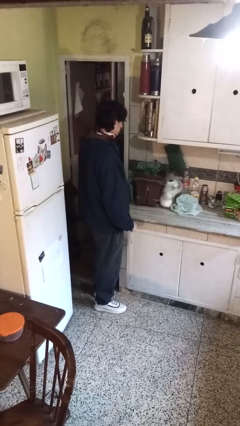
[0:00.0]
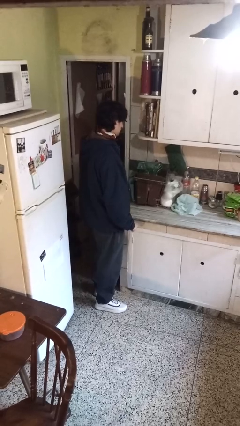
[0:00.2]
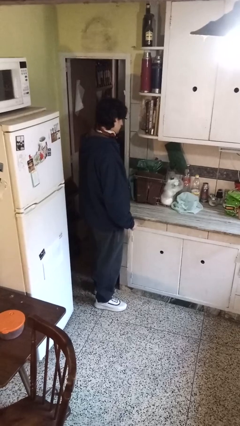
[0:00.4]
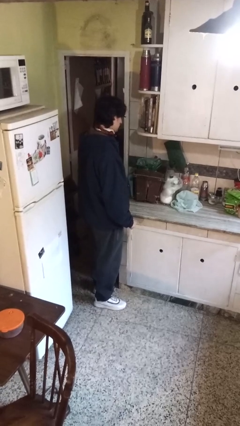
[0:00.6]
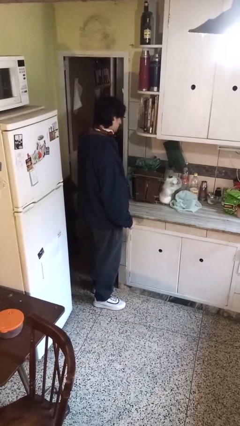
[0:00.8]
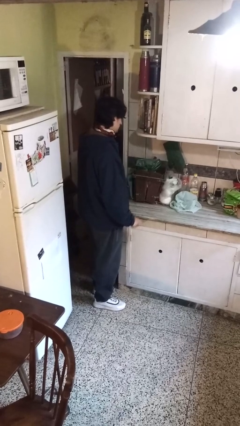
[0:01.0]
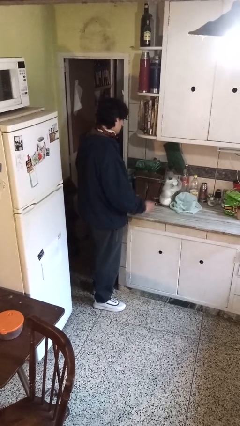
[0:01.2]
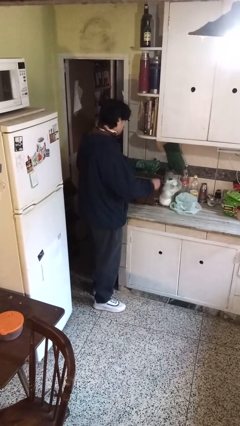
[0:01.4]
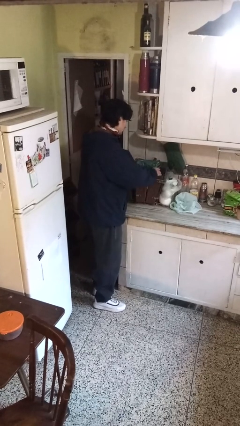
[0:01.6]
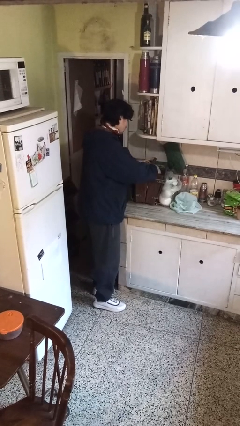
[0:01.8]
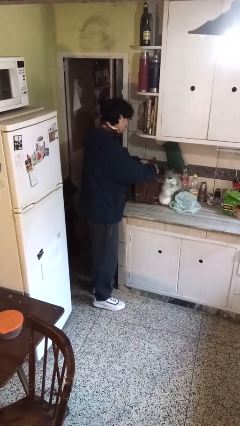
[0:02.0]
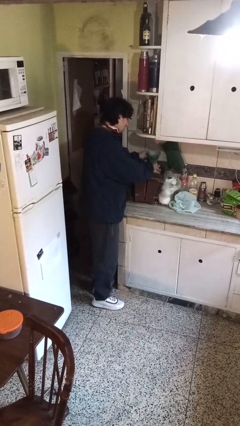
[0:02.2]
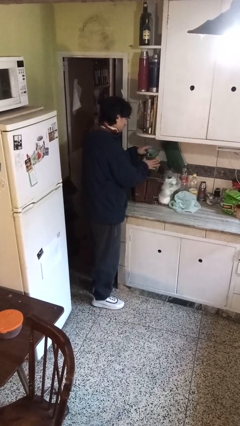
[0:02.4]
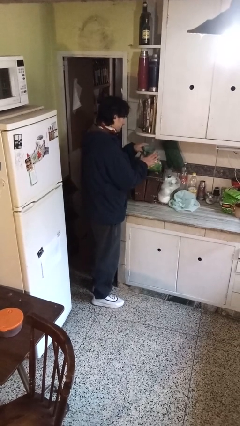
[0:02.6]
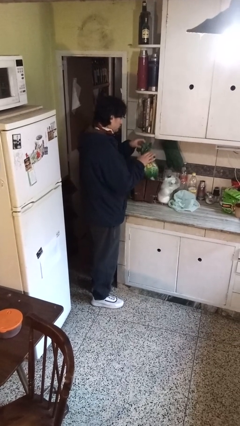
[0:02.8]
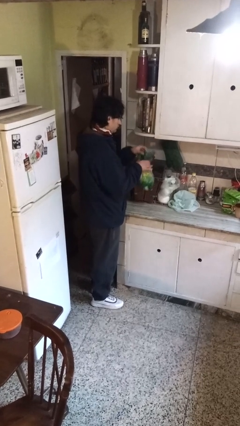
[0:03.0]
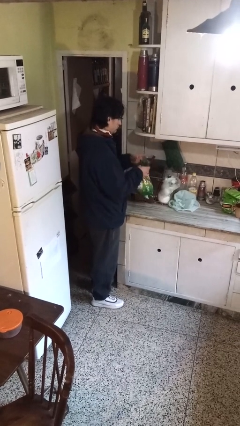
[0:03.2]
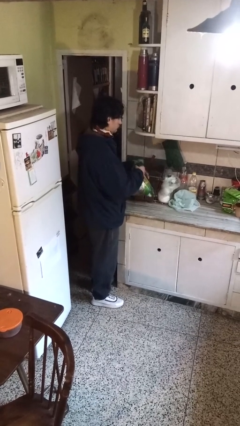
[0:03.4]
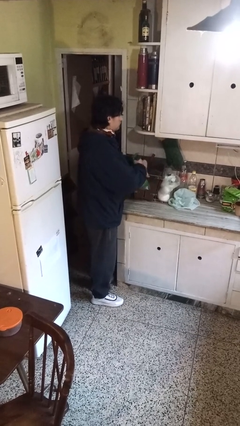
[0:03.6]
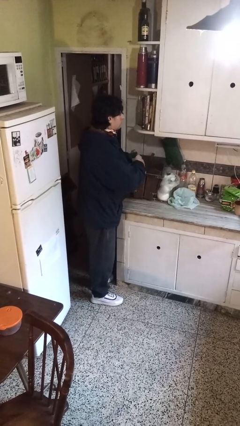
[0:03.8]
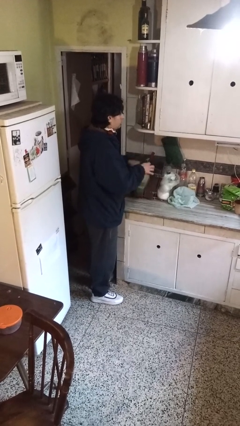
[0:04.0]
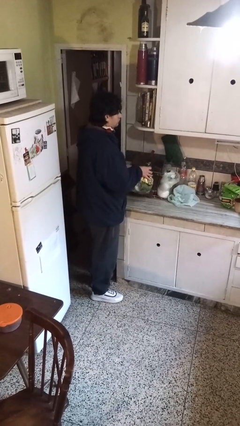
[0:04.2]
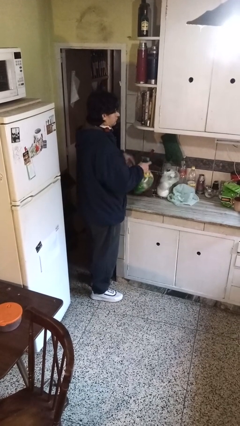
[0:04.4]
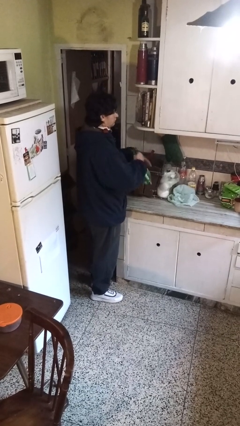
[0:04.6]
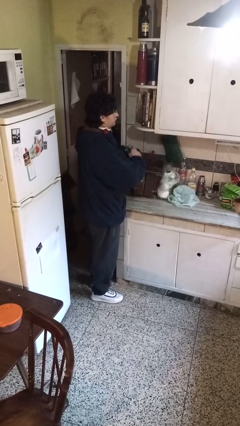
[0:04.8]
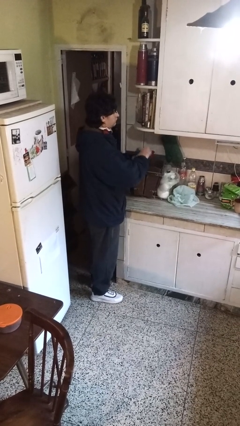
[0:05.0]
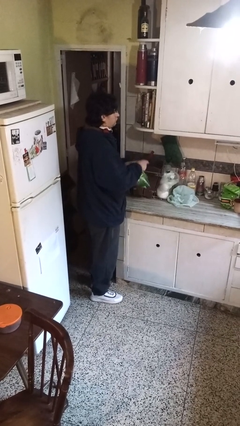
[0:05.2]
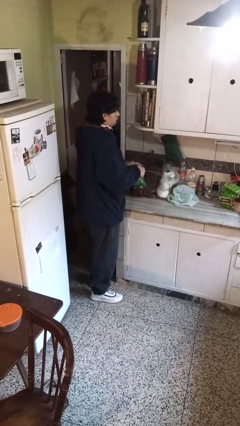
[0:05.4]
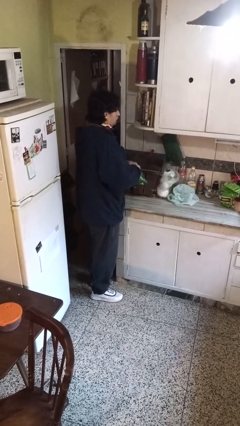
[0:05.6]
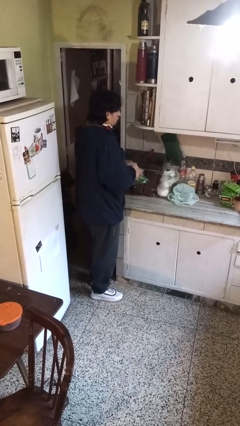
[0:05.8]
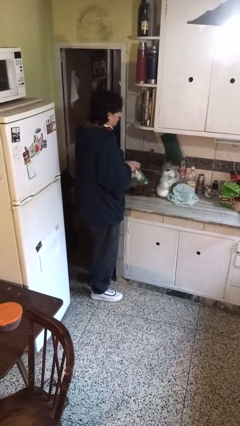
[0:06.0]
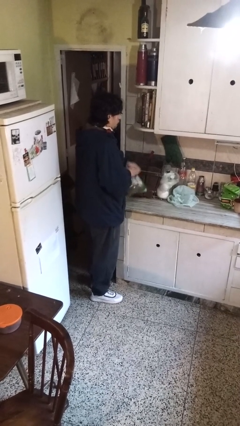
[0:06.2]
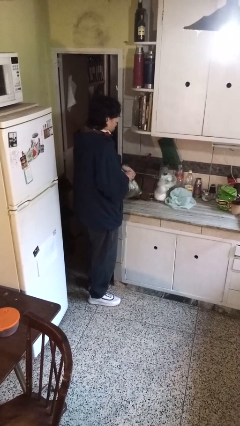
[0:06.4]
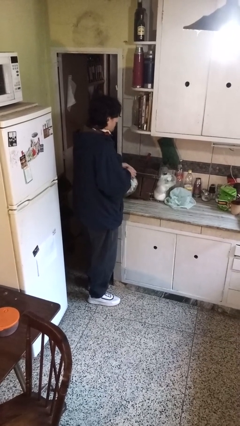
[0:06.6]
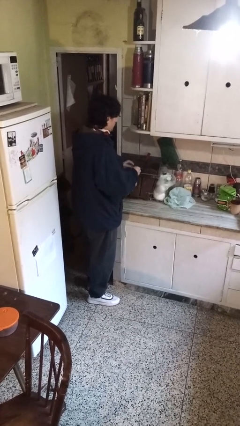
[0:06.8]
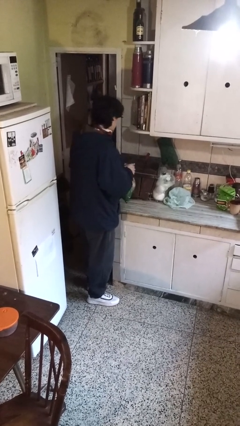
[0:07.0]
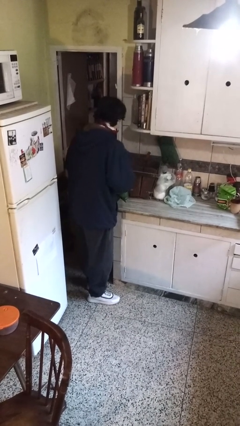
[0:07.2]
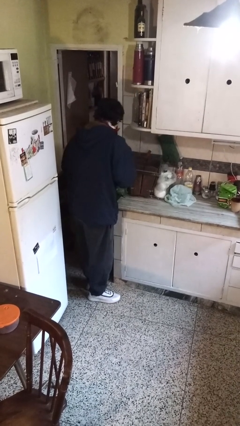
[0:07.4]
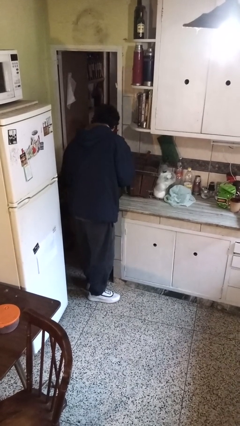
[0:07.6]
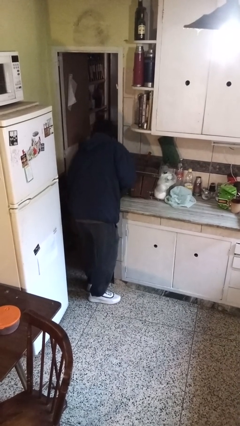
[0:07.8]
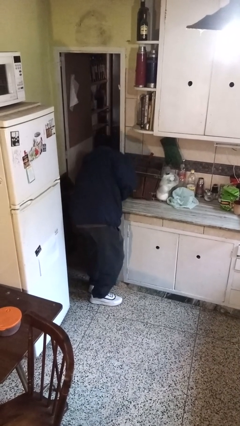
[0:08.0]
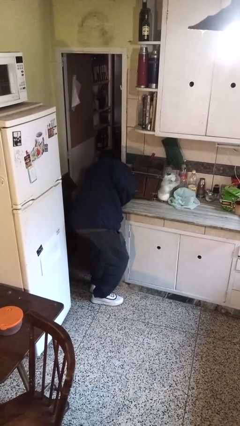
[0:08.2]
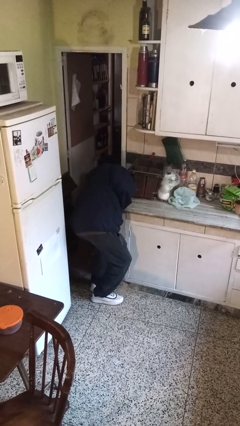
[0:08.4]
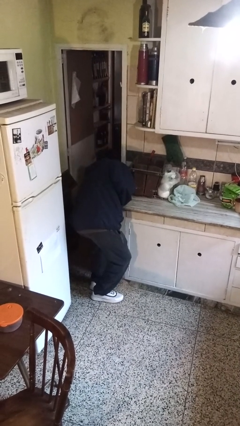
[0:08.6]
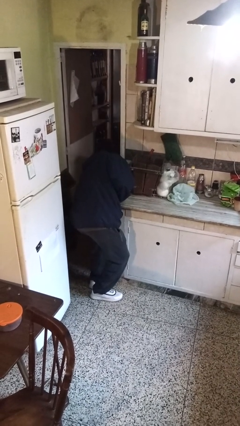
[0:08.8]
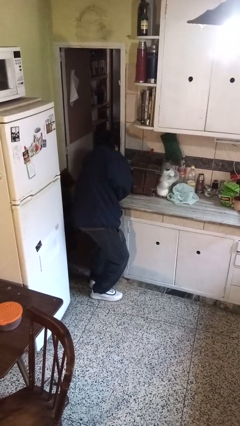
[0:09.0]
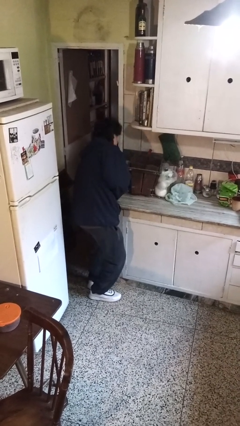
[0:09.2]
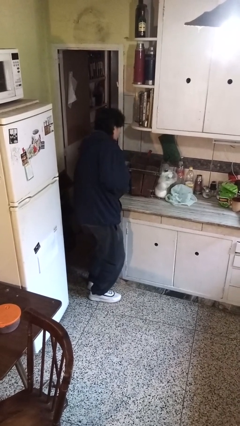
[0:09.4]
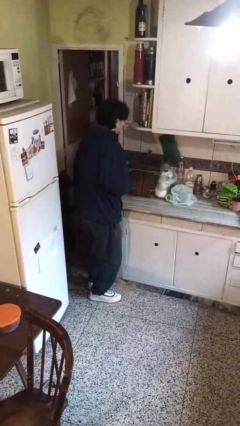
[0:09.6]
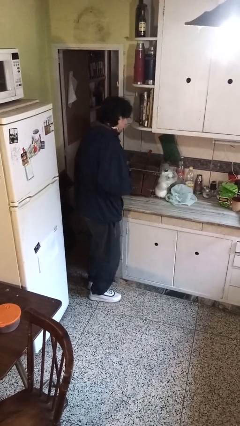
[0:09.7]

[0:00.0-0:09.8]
person removes trashbag from trashcan

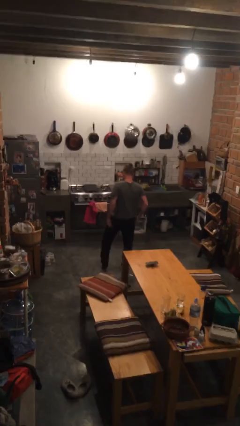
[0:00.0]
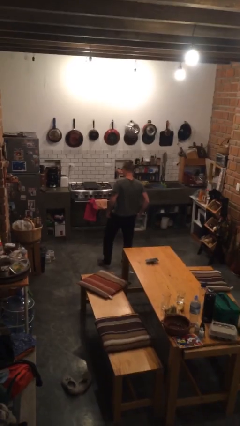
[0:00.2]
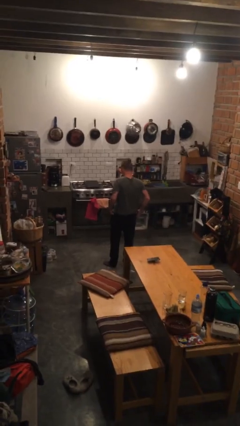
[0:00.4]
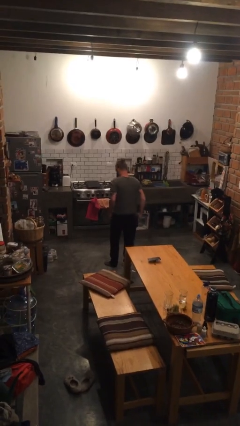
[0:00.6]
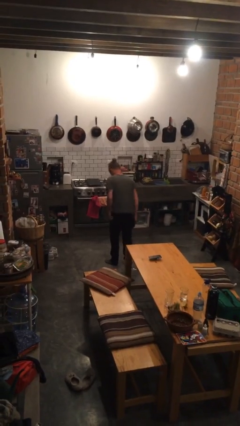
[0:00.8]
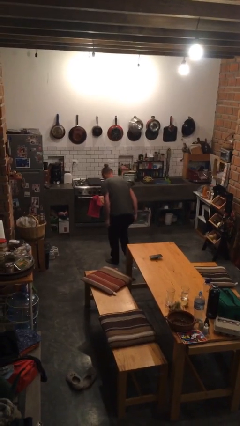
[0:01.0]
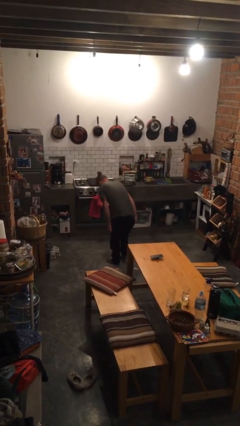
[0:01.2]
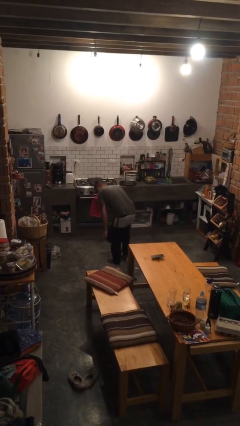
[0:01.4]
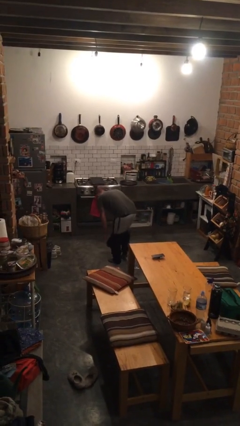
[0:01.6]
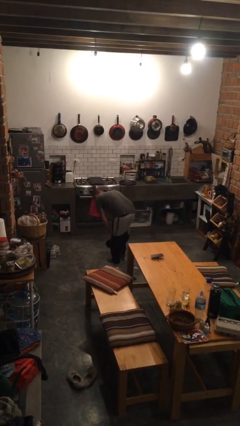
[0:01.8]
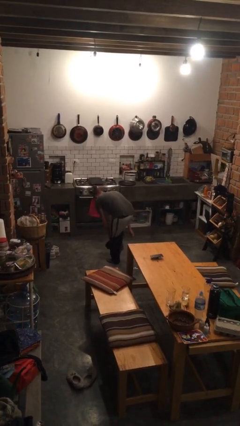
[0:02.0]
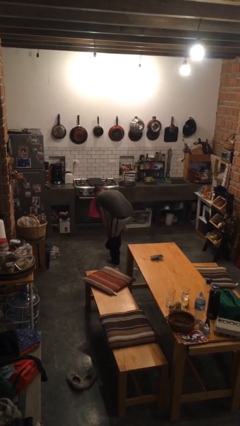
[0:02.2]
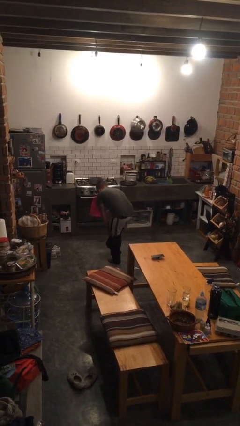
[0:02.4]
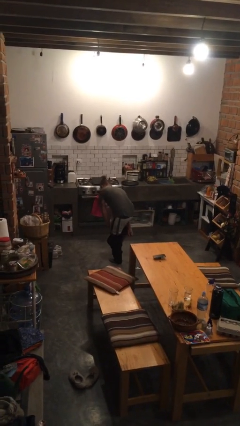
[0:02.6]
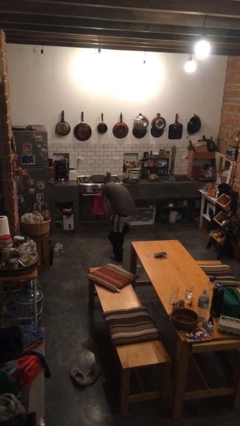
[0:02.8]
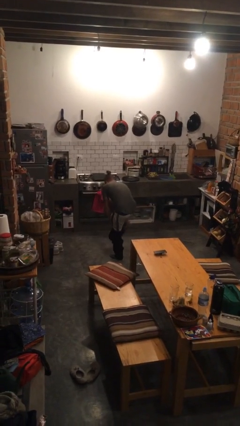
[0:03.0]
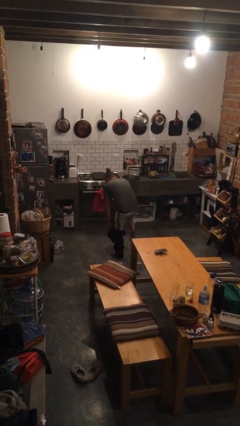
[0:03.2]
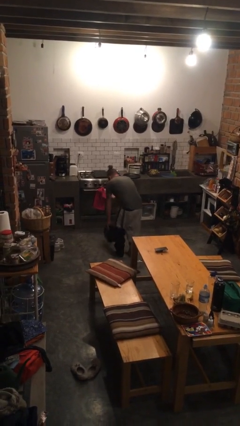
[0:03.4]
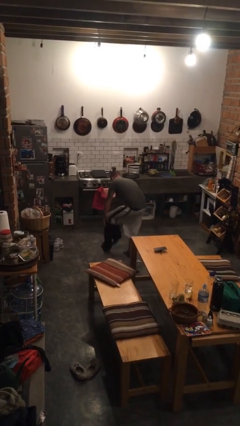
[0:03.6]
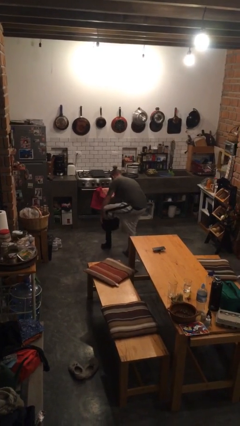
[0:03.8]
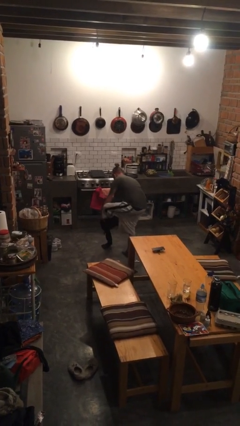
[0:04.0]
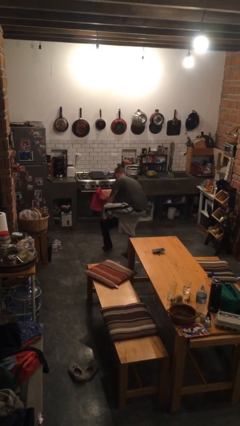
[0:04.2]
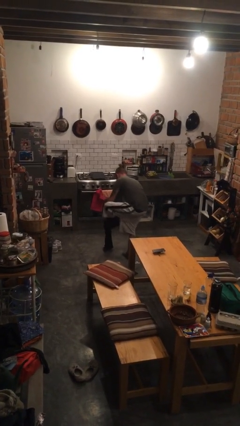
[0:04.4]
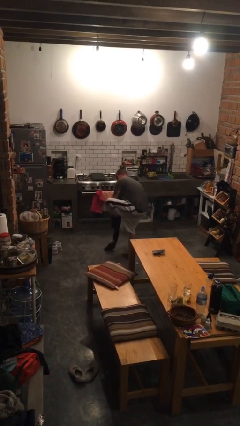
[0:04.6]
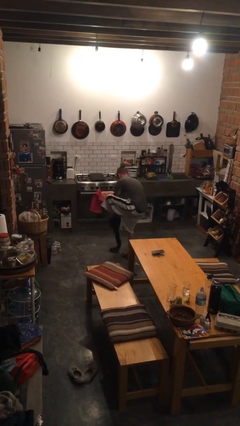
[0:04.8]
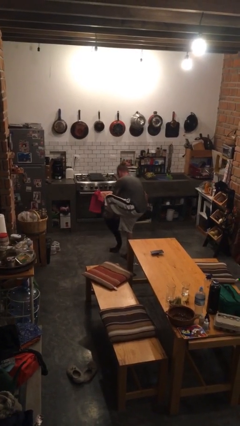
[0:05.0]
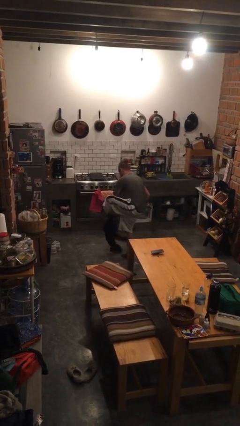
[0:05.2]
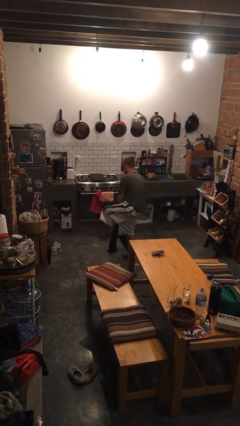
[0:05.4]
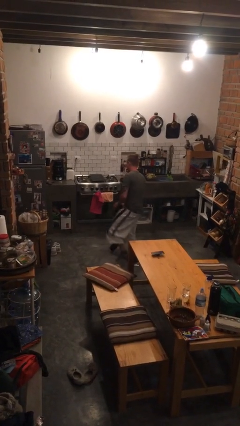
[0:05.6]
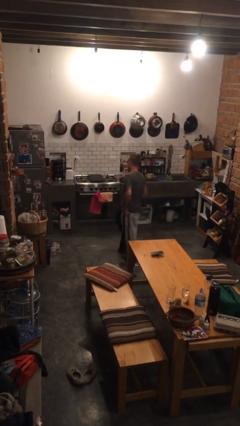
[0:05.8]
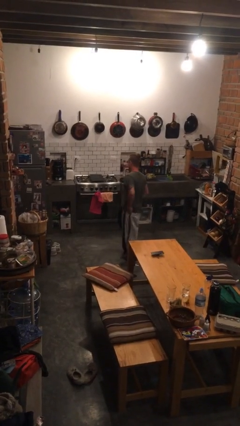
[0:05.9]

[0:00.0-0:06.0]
person takes off pants

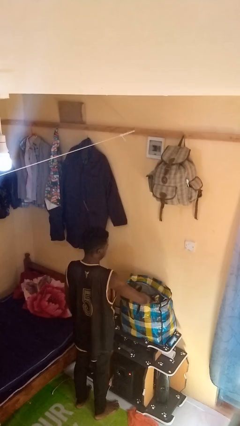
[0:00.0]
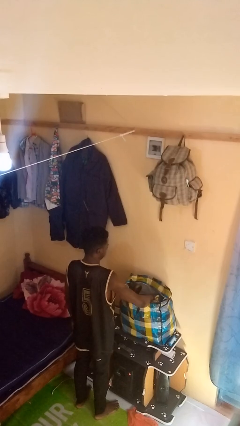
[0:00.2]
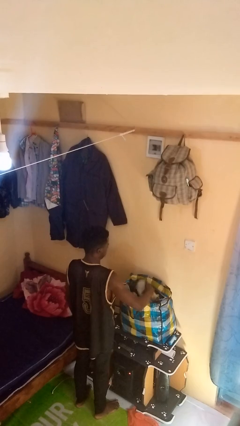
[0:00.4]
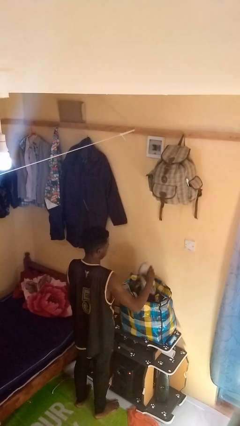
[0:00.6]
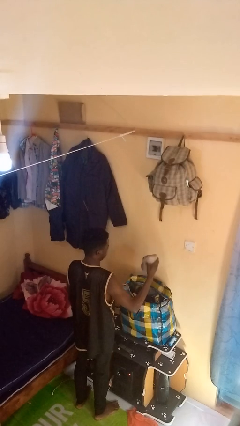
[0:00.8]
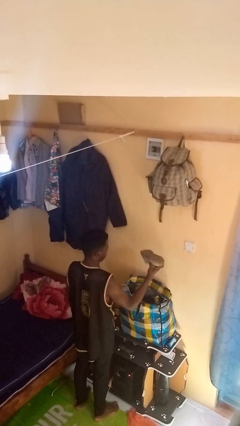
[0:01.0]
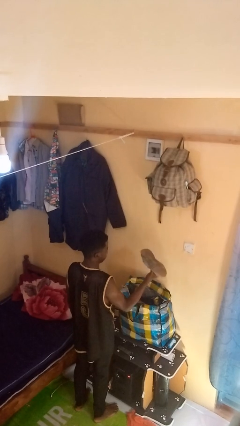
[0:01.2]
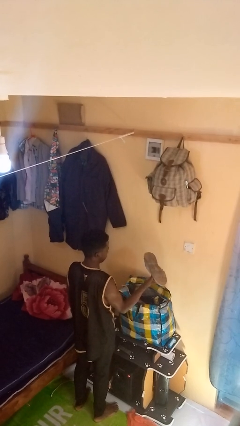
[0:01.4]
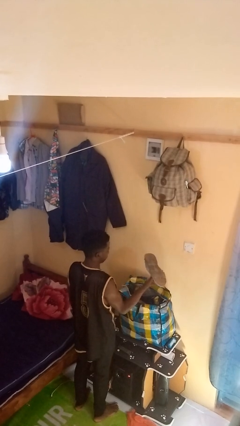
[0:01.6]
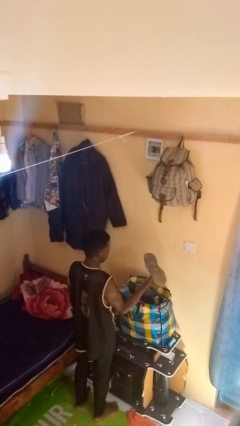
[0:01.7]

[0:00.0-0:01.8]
person takes object from bag
